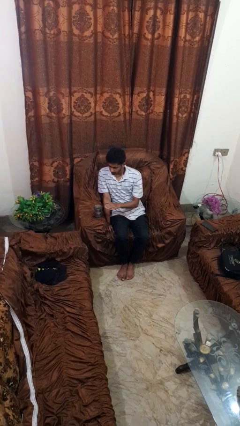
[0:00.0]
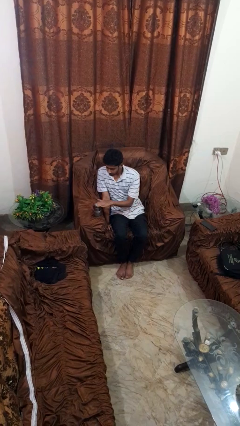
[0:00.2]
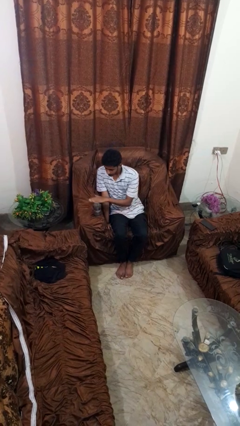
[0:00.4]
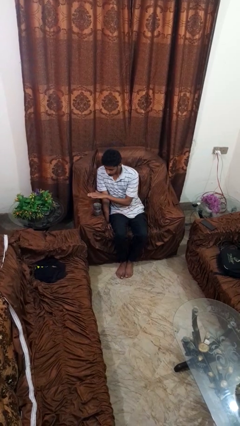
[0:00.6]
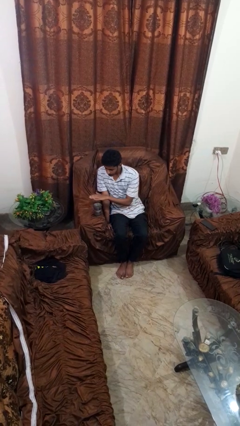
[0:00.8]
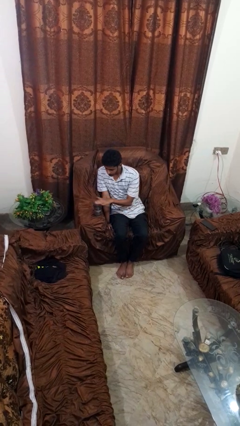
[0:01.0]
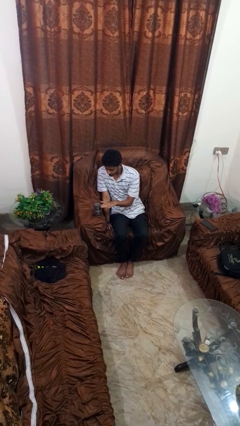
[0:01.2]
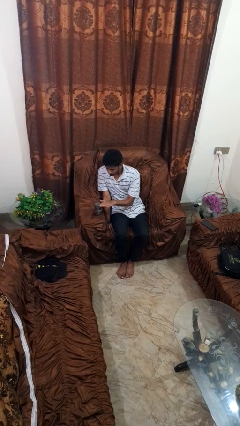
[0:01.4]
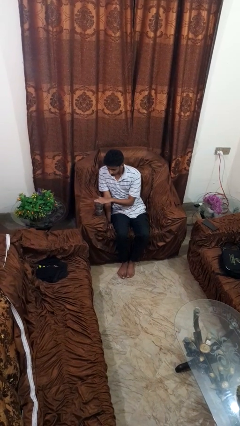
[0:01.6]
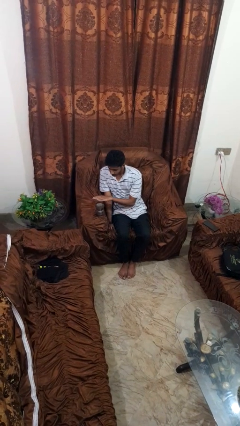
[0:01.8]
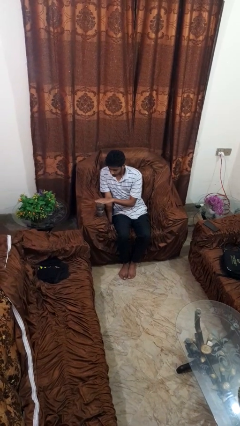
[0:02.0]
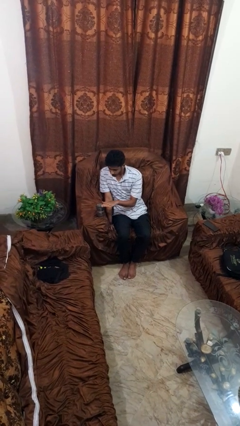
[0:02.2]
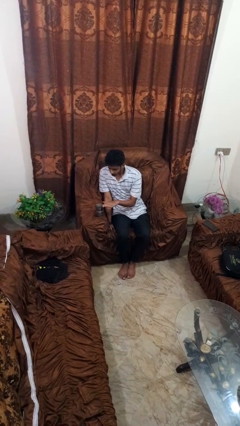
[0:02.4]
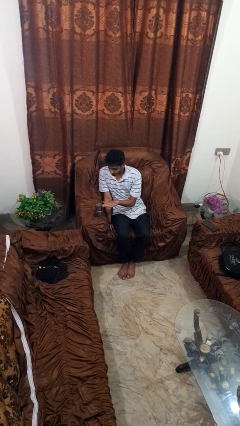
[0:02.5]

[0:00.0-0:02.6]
person waves hand over object

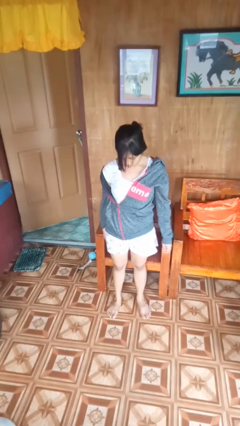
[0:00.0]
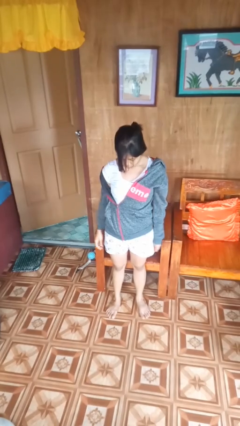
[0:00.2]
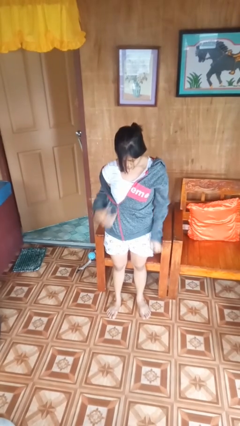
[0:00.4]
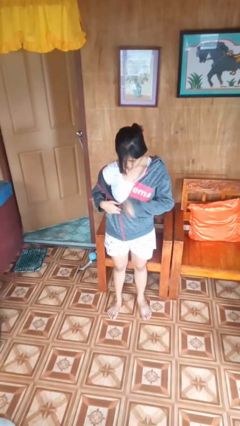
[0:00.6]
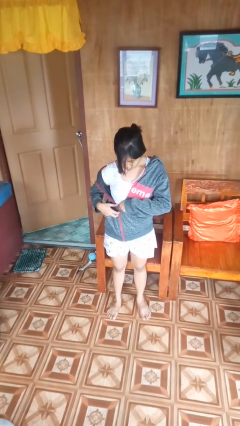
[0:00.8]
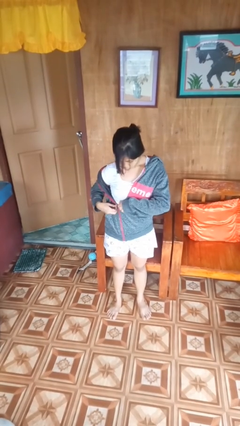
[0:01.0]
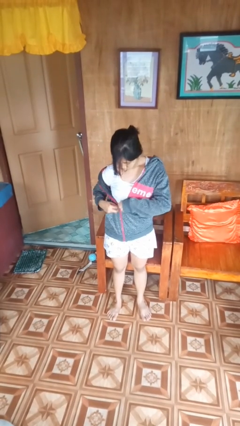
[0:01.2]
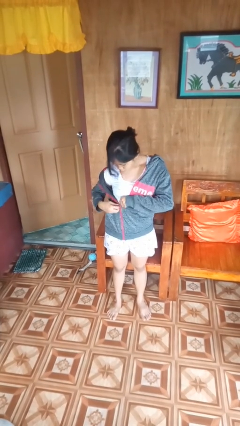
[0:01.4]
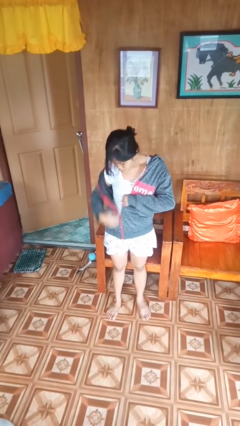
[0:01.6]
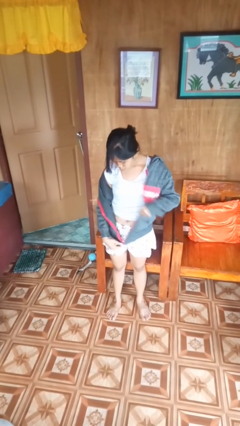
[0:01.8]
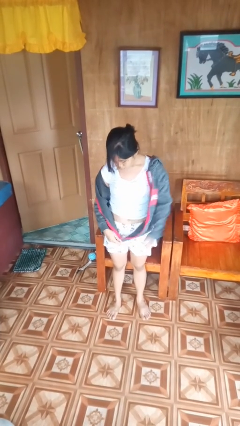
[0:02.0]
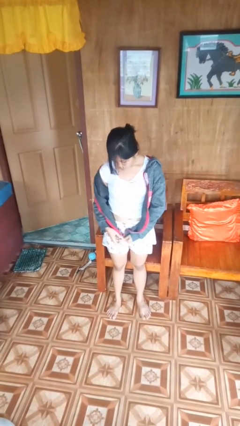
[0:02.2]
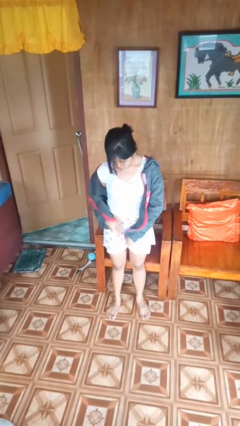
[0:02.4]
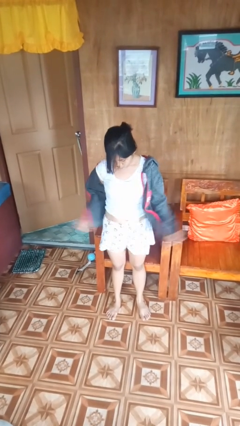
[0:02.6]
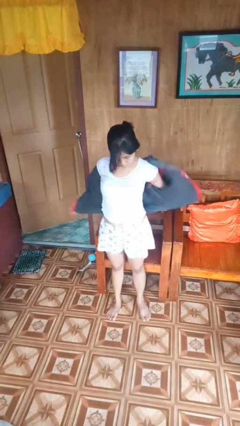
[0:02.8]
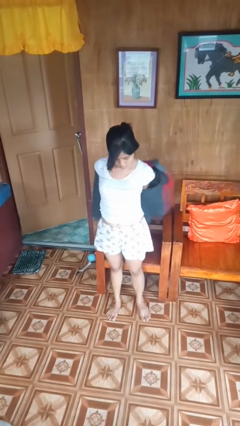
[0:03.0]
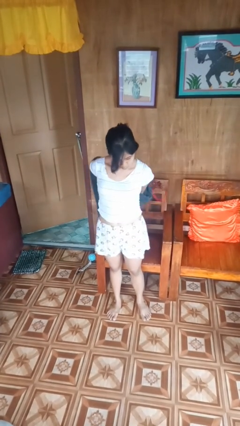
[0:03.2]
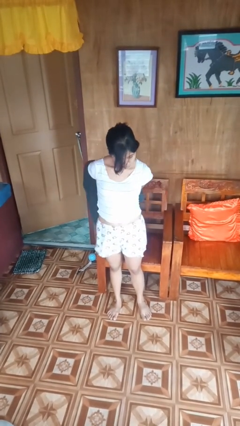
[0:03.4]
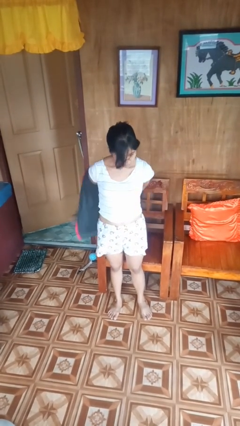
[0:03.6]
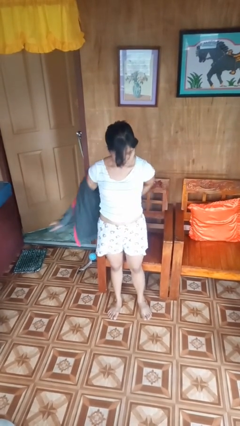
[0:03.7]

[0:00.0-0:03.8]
person unzips jacket

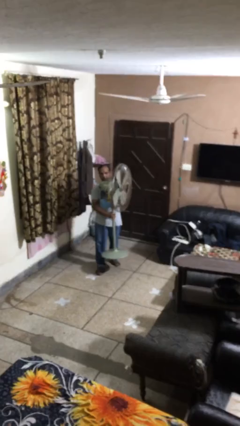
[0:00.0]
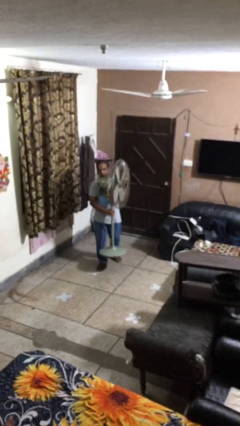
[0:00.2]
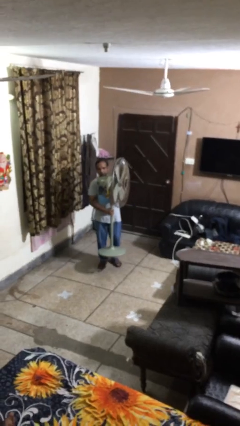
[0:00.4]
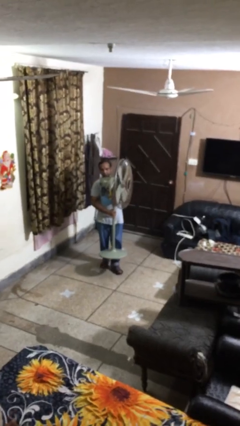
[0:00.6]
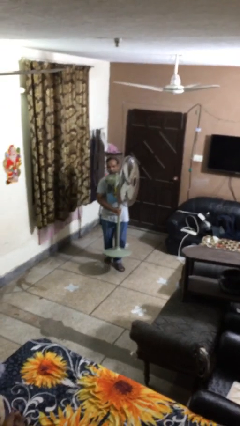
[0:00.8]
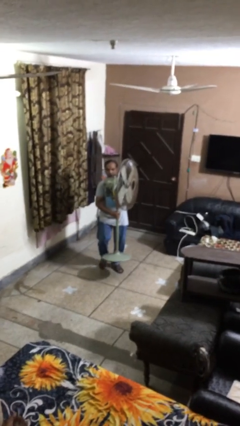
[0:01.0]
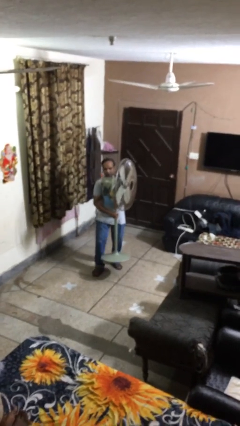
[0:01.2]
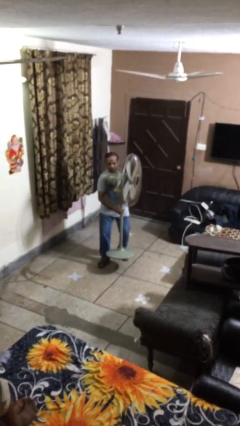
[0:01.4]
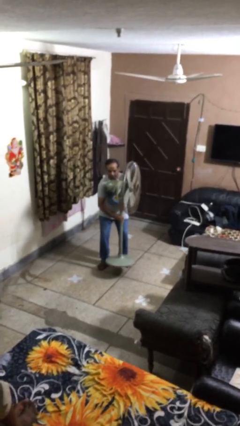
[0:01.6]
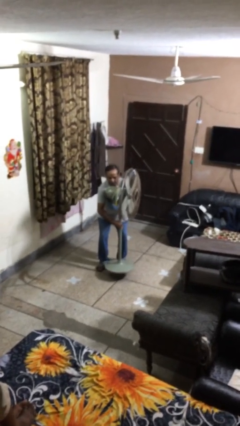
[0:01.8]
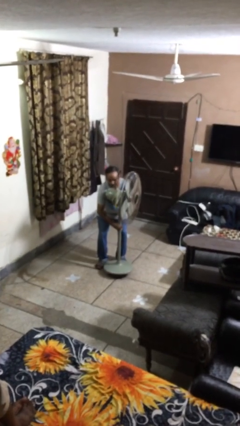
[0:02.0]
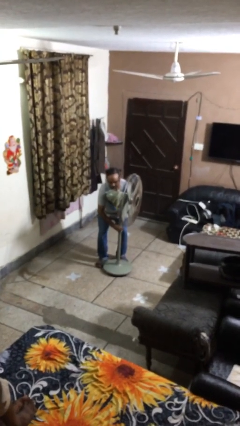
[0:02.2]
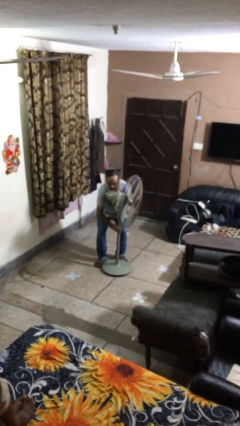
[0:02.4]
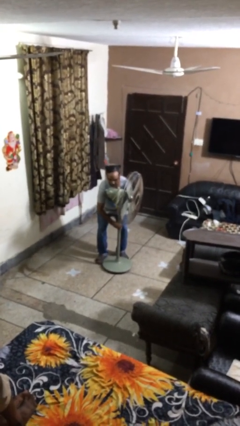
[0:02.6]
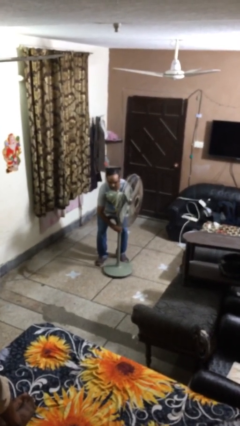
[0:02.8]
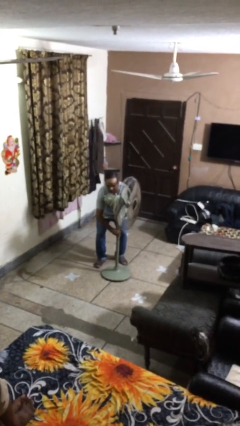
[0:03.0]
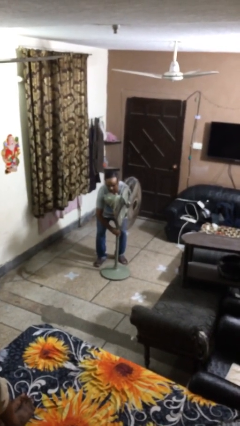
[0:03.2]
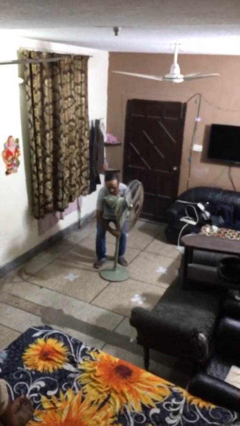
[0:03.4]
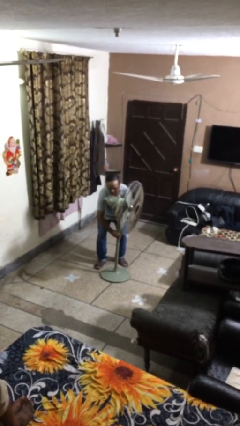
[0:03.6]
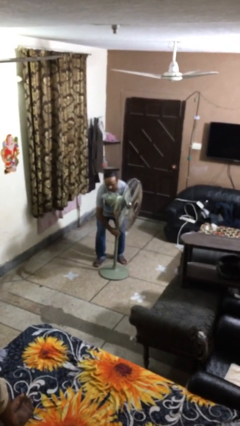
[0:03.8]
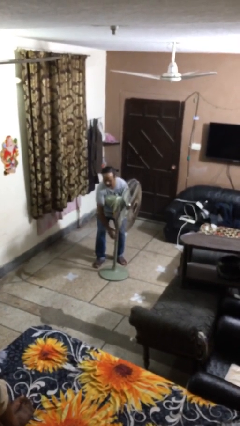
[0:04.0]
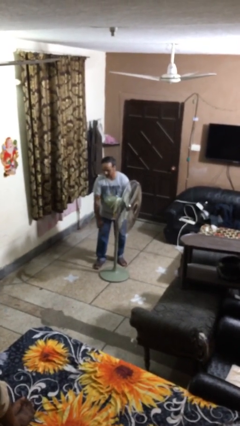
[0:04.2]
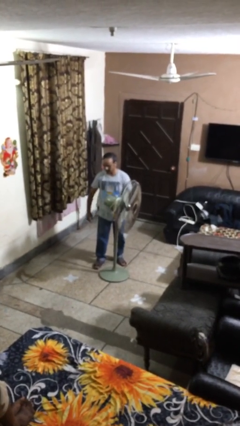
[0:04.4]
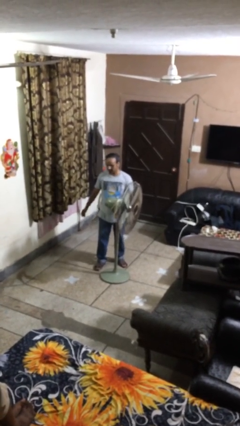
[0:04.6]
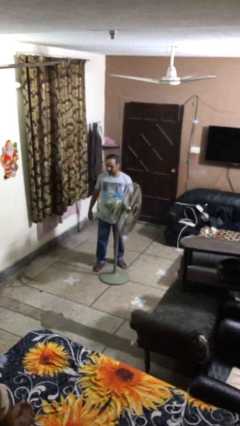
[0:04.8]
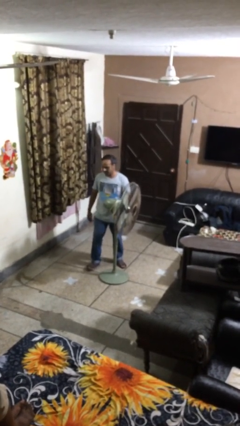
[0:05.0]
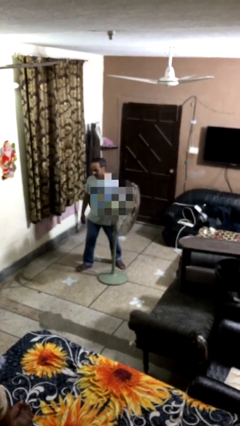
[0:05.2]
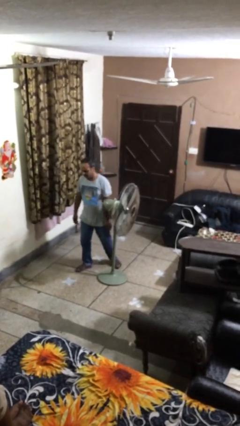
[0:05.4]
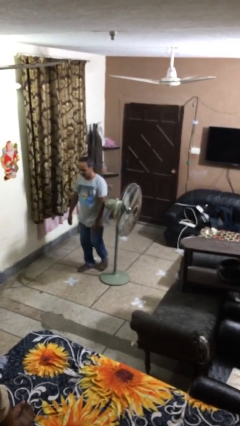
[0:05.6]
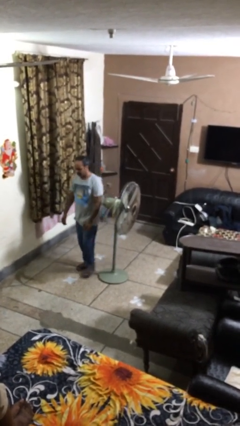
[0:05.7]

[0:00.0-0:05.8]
person puts down object on floor

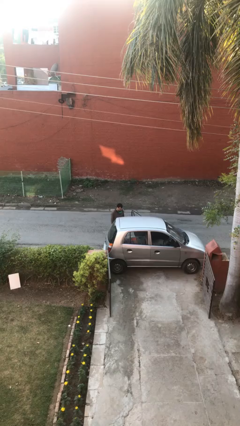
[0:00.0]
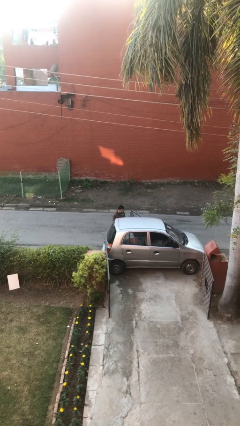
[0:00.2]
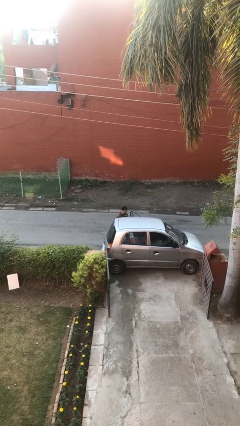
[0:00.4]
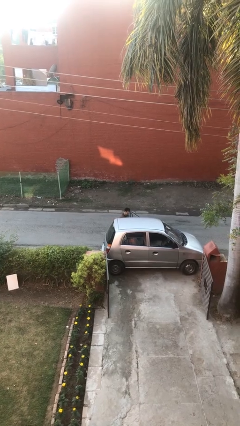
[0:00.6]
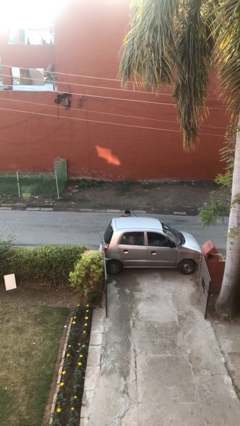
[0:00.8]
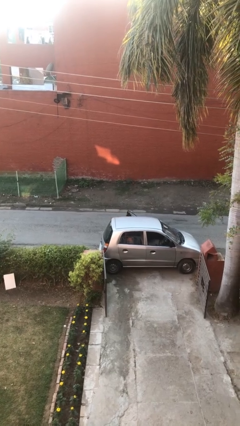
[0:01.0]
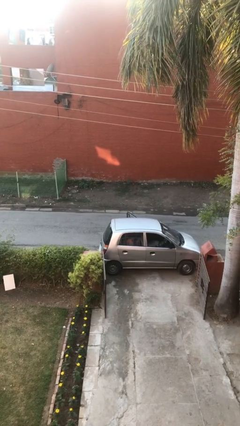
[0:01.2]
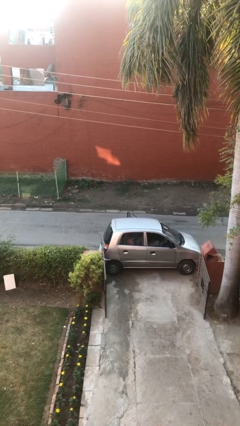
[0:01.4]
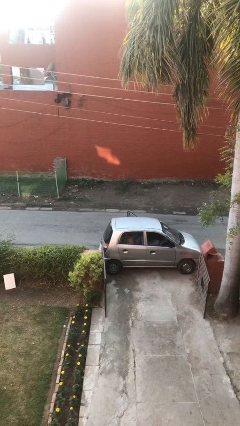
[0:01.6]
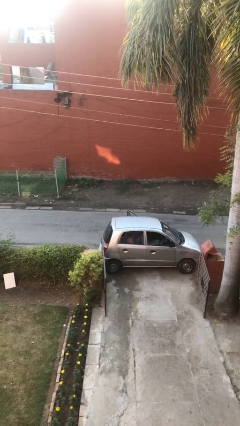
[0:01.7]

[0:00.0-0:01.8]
person enters car

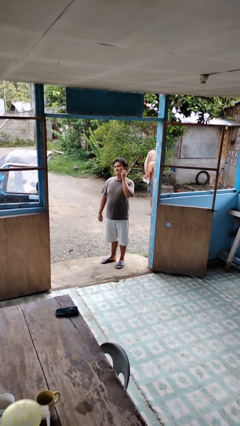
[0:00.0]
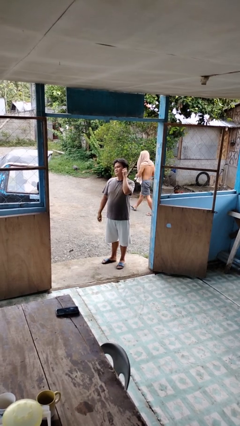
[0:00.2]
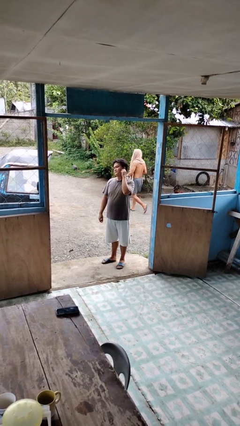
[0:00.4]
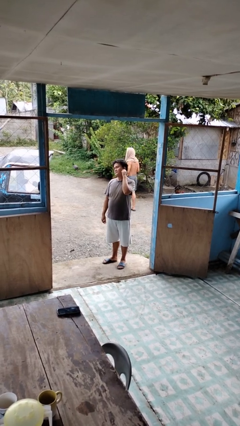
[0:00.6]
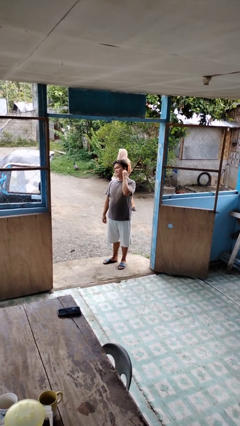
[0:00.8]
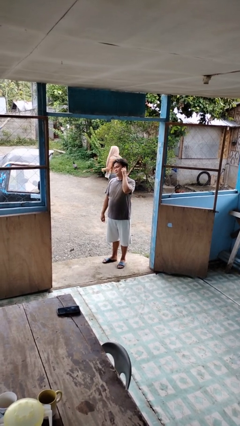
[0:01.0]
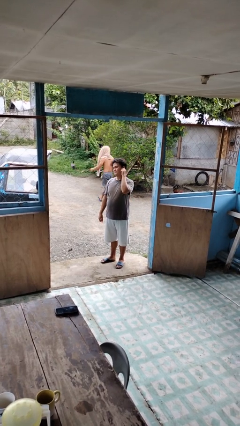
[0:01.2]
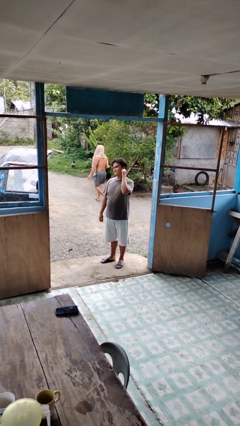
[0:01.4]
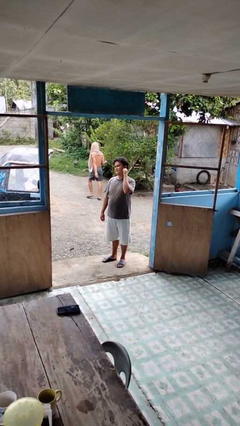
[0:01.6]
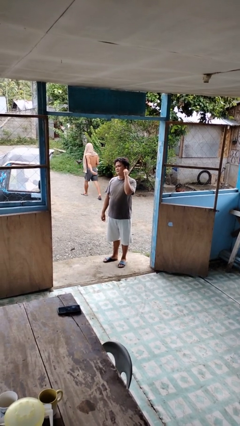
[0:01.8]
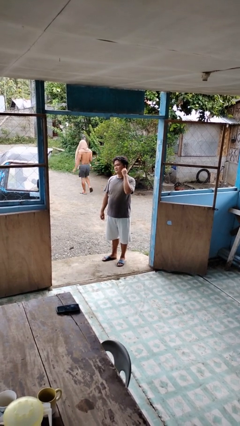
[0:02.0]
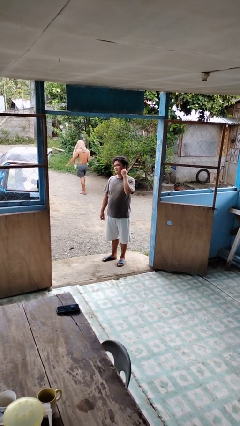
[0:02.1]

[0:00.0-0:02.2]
person touches earlobe

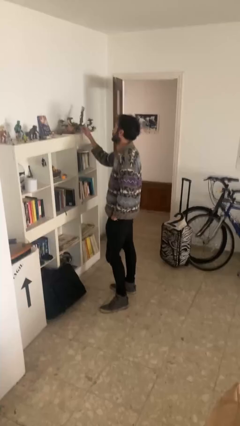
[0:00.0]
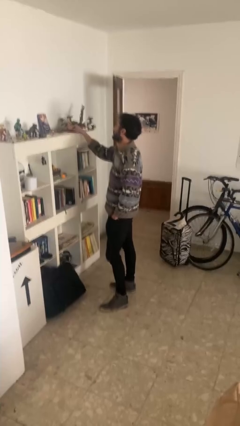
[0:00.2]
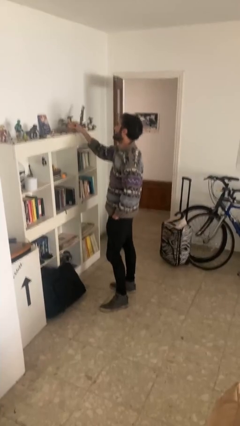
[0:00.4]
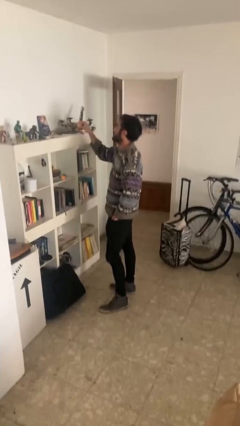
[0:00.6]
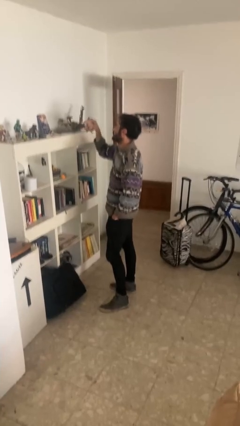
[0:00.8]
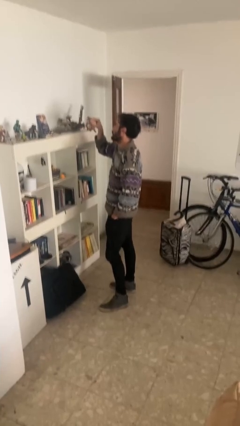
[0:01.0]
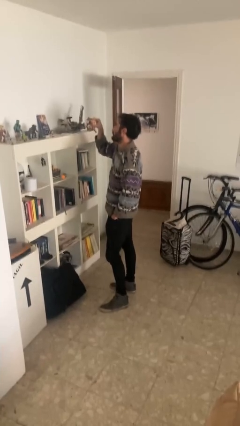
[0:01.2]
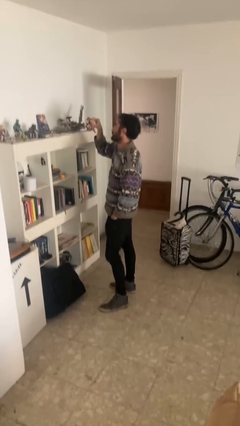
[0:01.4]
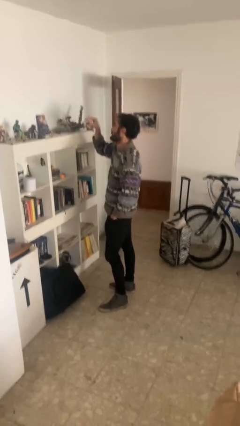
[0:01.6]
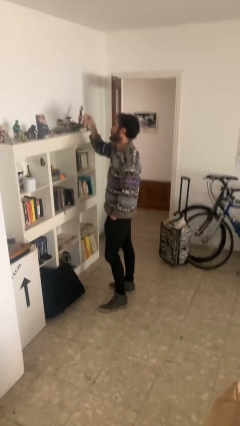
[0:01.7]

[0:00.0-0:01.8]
person picks up object from shelf
